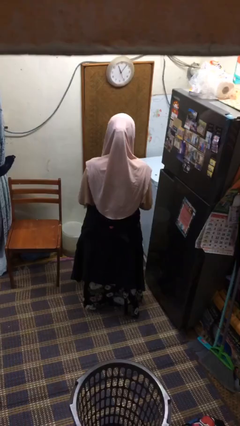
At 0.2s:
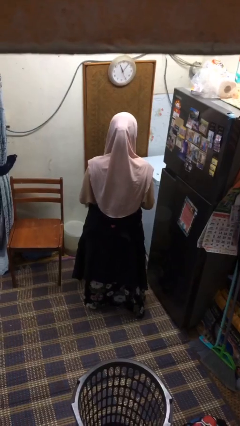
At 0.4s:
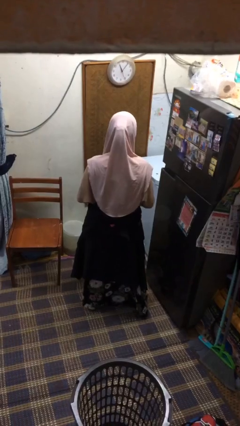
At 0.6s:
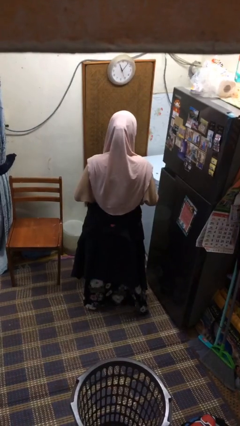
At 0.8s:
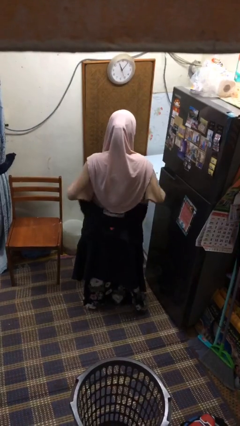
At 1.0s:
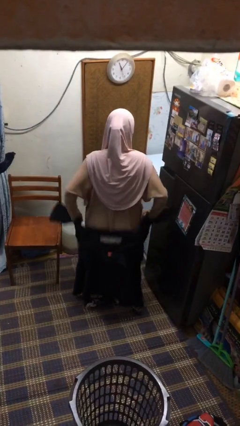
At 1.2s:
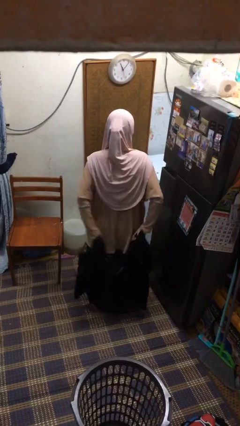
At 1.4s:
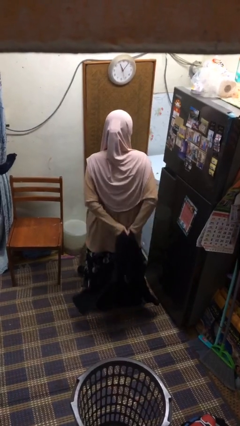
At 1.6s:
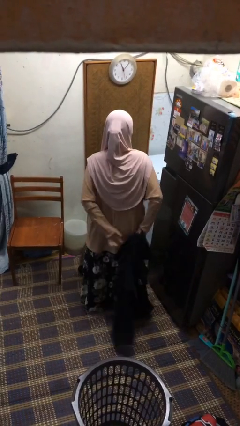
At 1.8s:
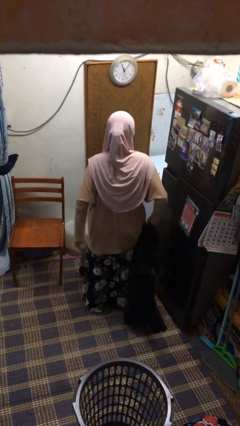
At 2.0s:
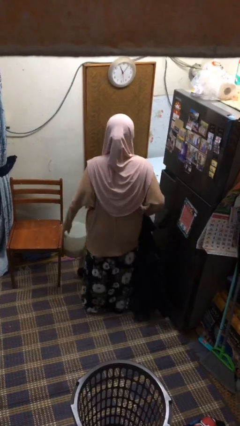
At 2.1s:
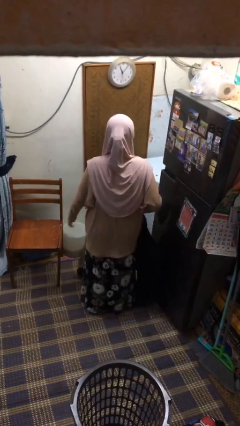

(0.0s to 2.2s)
person unties jacket around waist

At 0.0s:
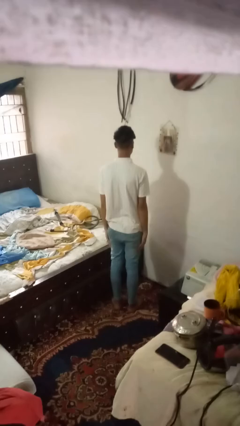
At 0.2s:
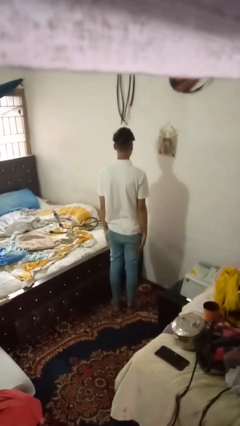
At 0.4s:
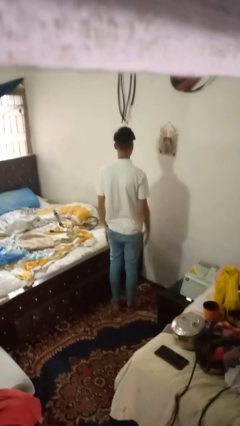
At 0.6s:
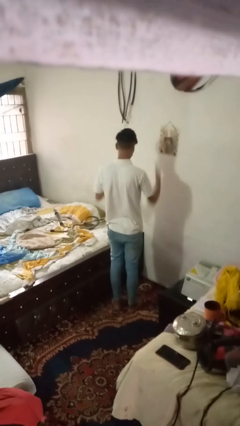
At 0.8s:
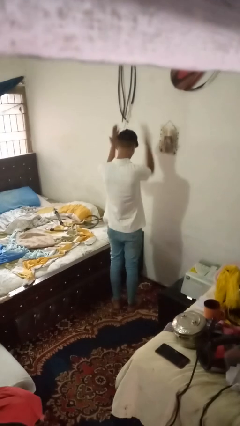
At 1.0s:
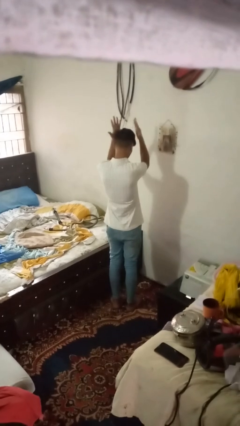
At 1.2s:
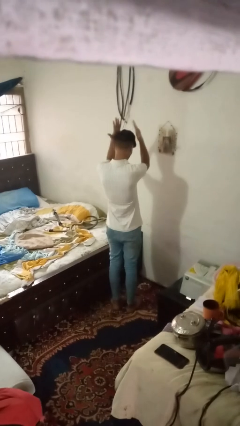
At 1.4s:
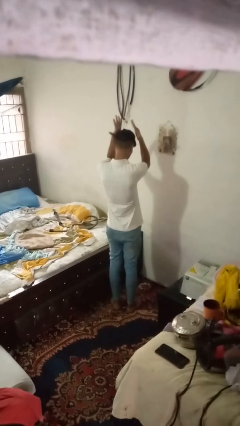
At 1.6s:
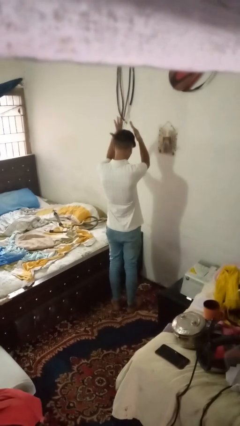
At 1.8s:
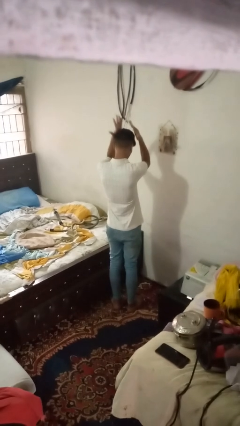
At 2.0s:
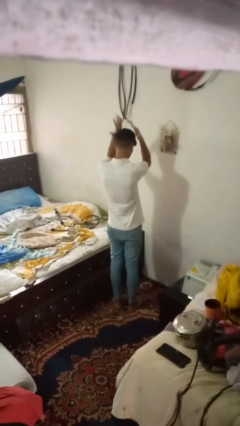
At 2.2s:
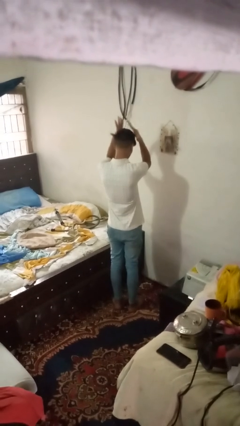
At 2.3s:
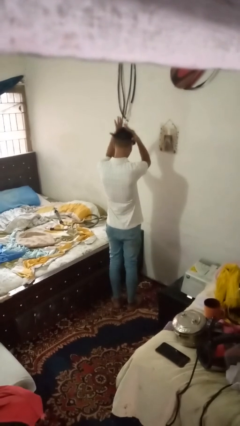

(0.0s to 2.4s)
person pats head

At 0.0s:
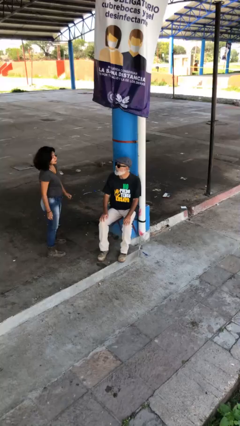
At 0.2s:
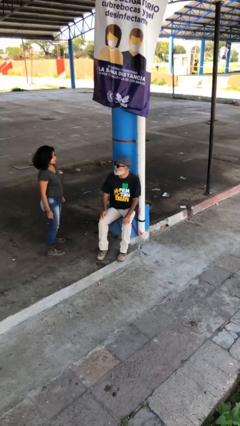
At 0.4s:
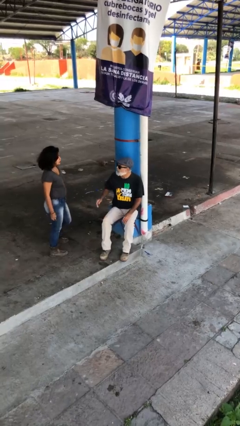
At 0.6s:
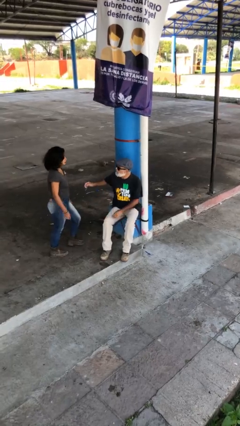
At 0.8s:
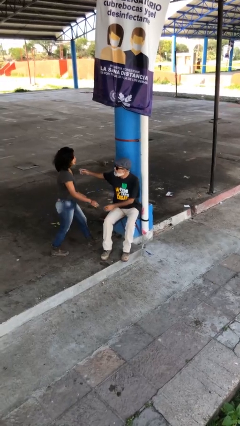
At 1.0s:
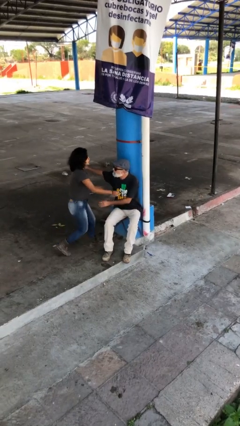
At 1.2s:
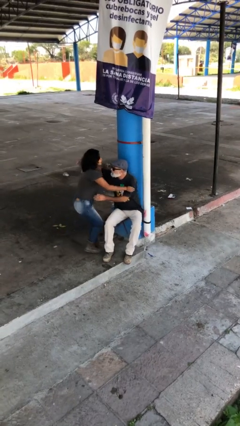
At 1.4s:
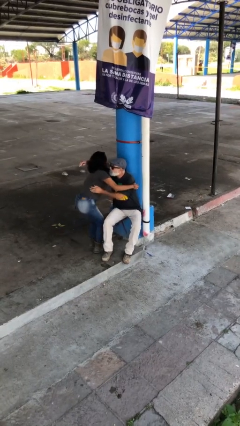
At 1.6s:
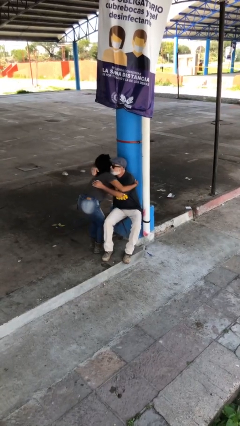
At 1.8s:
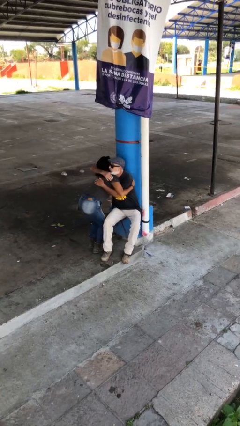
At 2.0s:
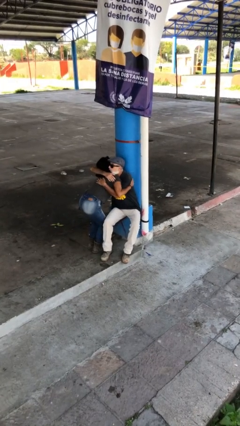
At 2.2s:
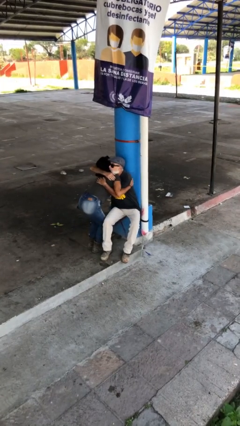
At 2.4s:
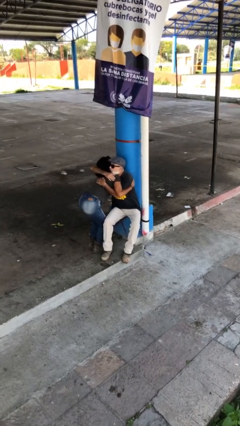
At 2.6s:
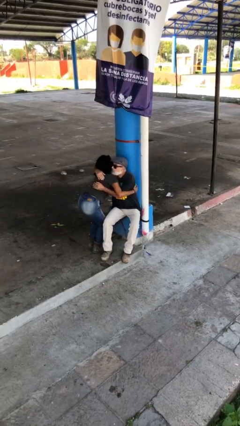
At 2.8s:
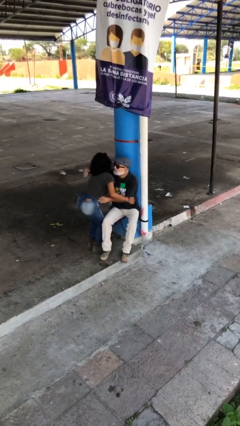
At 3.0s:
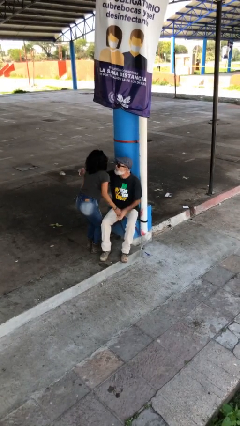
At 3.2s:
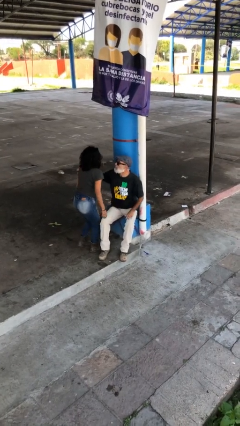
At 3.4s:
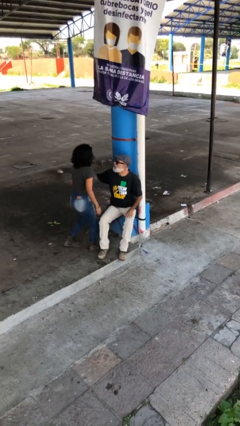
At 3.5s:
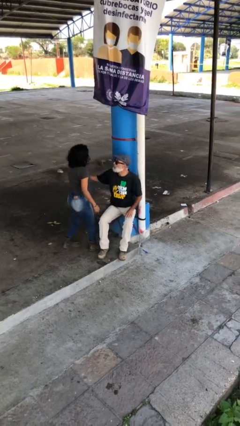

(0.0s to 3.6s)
person embraces person

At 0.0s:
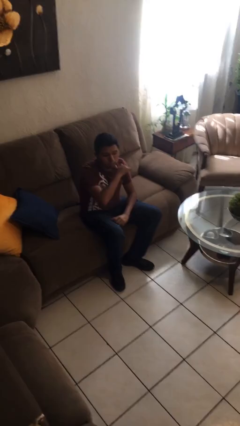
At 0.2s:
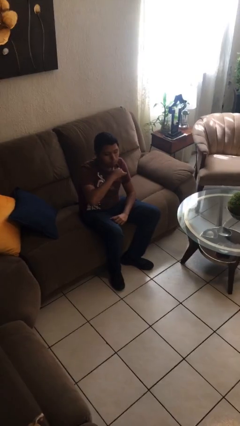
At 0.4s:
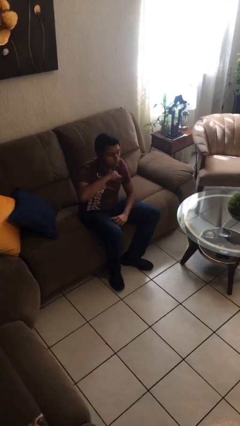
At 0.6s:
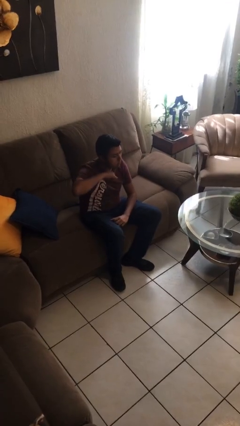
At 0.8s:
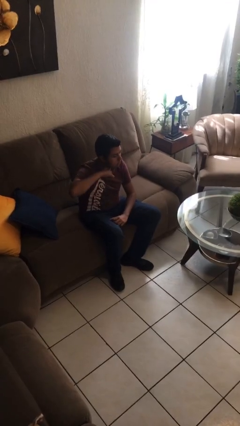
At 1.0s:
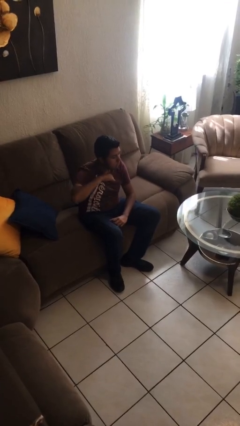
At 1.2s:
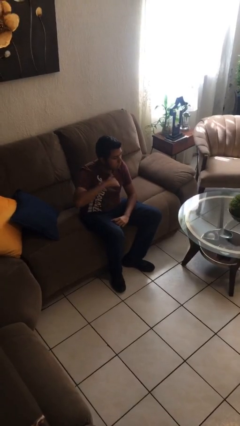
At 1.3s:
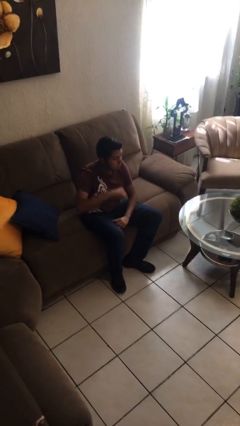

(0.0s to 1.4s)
person gestures cut

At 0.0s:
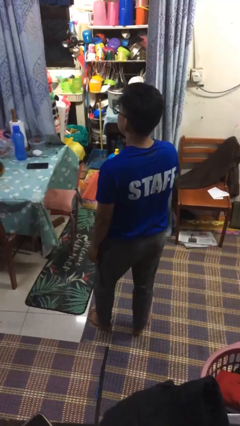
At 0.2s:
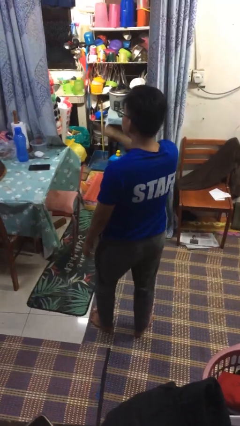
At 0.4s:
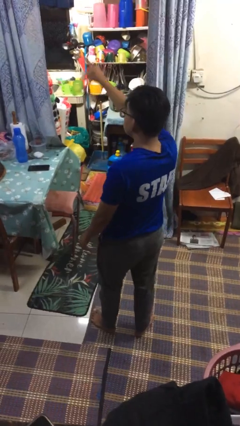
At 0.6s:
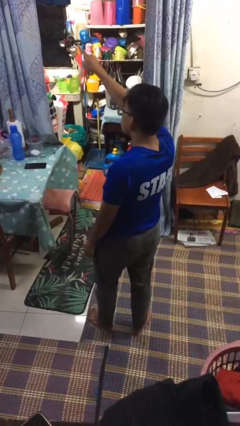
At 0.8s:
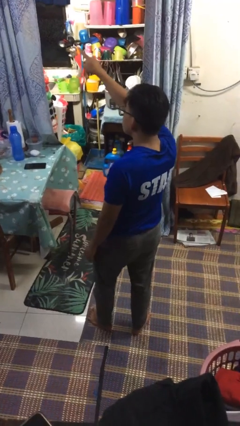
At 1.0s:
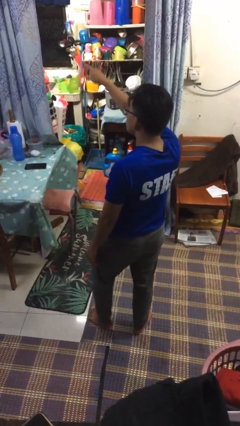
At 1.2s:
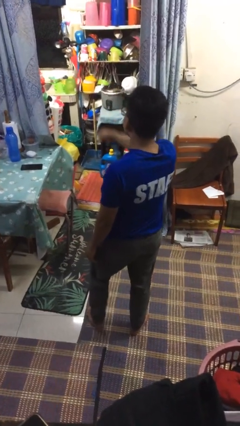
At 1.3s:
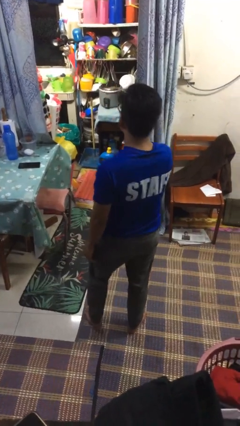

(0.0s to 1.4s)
person points at person

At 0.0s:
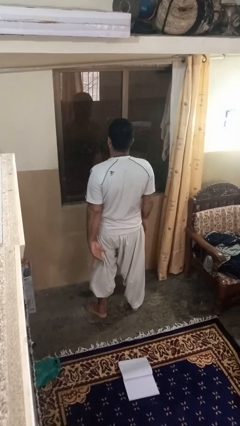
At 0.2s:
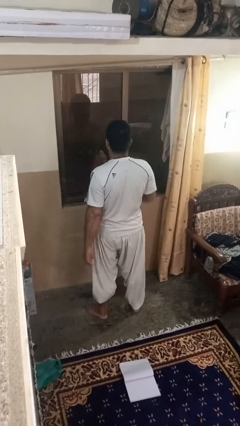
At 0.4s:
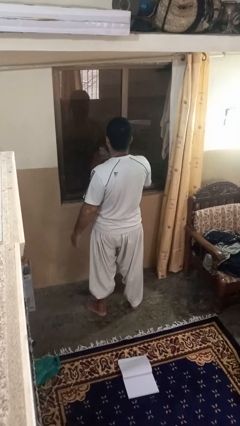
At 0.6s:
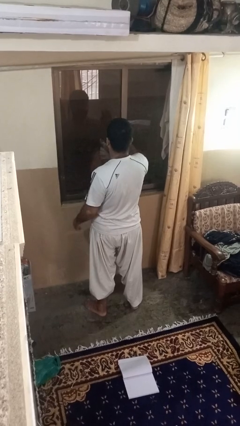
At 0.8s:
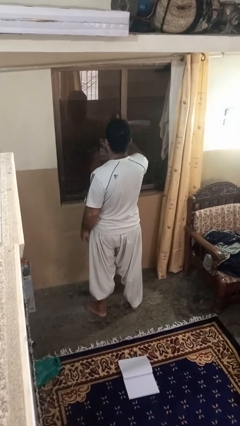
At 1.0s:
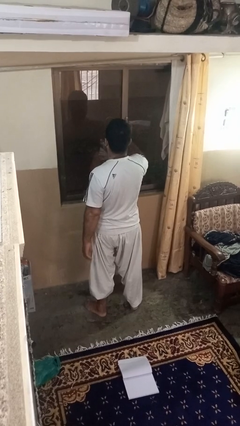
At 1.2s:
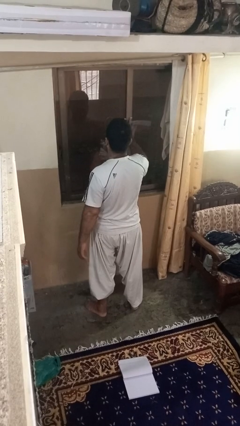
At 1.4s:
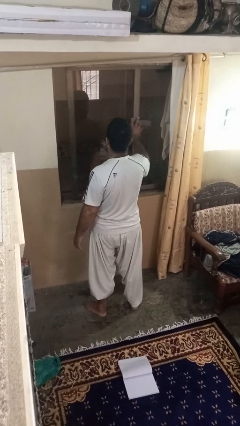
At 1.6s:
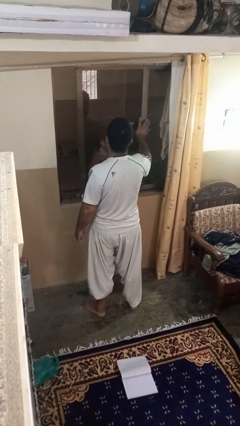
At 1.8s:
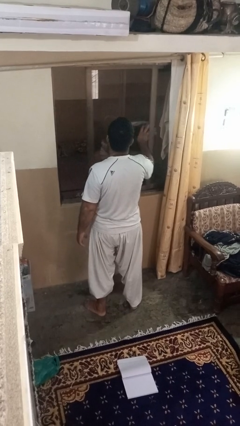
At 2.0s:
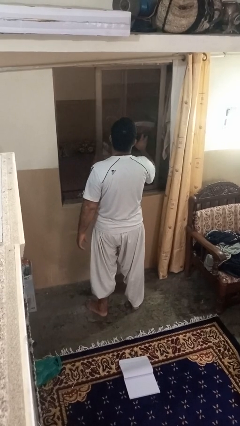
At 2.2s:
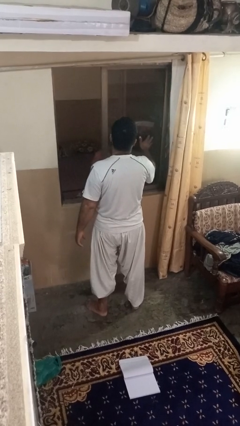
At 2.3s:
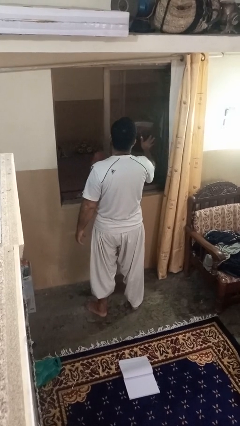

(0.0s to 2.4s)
person opens home window

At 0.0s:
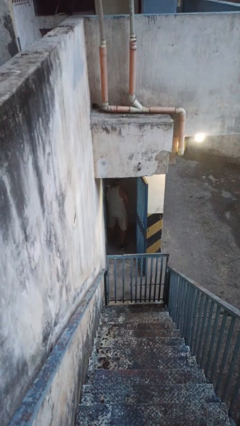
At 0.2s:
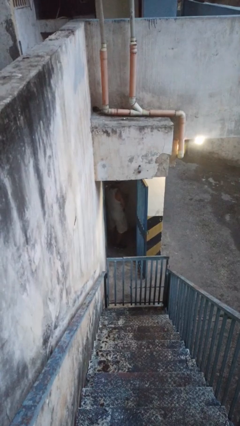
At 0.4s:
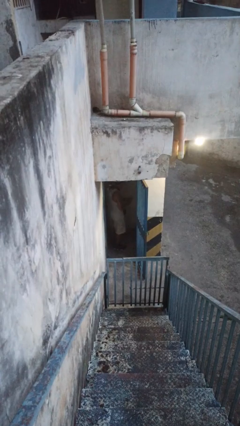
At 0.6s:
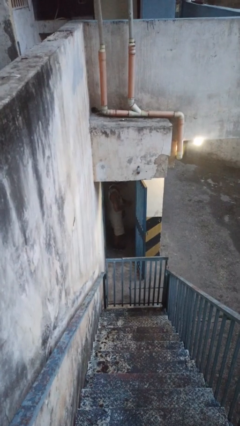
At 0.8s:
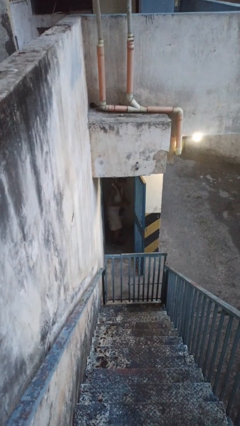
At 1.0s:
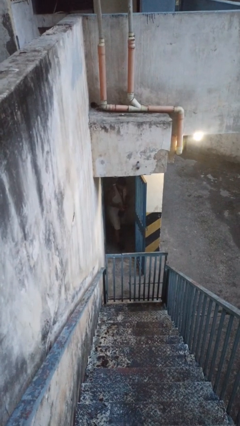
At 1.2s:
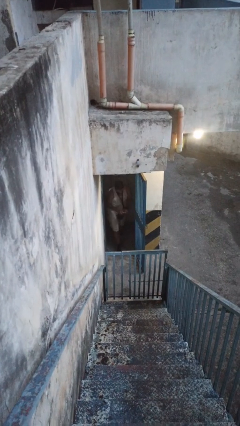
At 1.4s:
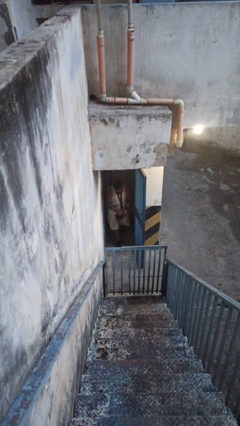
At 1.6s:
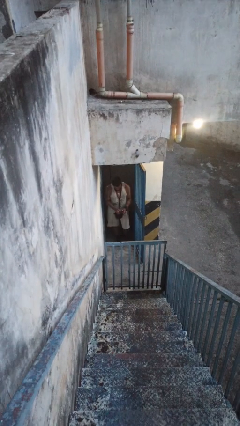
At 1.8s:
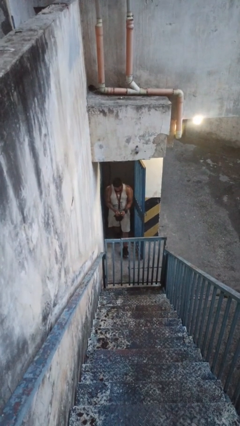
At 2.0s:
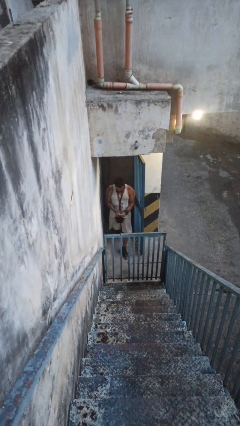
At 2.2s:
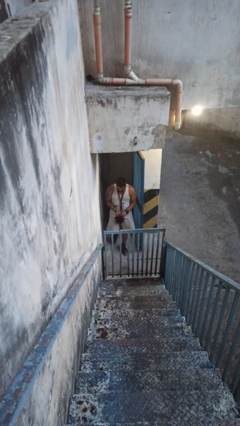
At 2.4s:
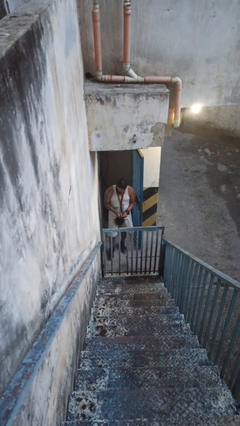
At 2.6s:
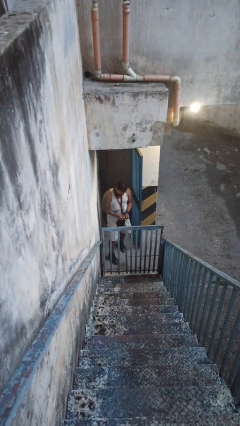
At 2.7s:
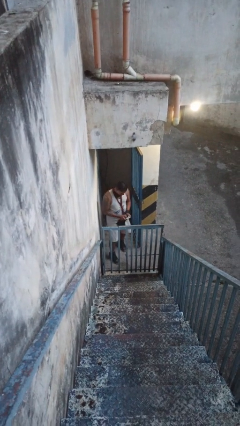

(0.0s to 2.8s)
person enters scene through structure

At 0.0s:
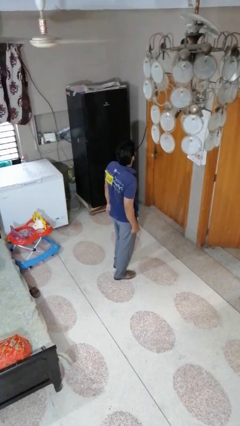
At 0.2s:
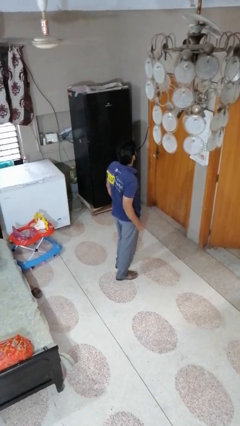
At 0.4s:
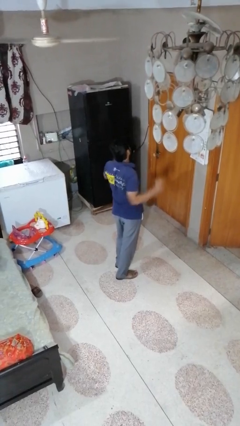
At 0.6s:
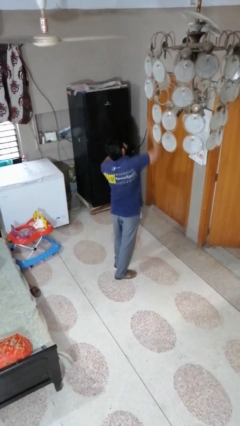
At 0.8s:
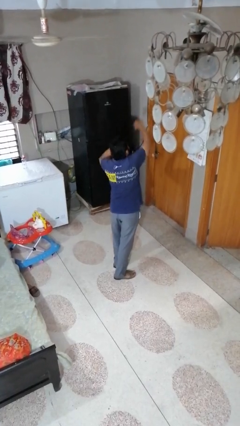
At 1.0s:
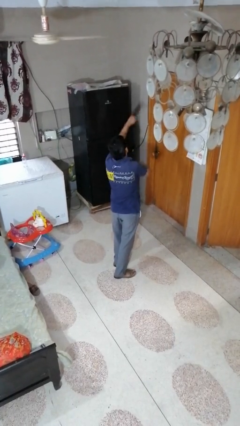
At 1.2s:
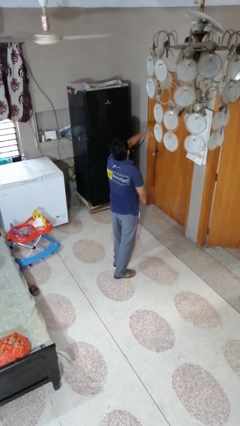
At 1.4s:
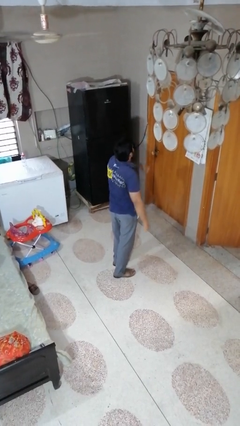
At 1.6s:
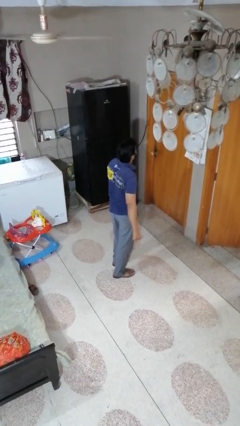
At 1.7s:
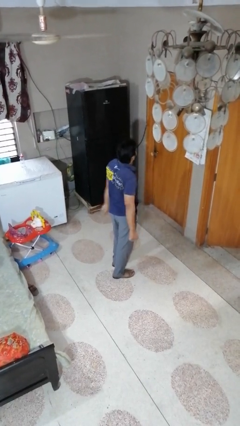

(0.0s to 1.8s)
person punches
